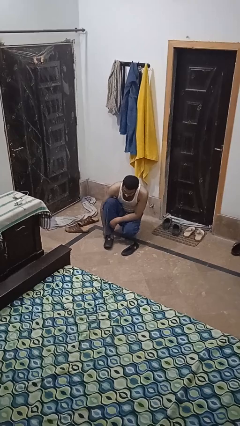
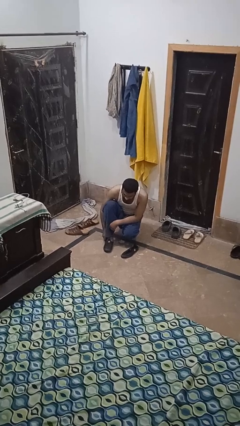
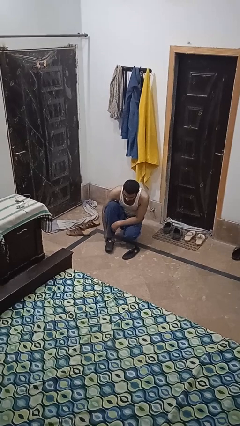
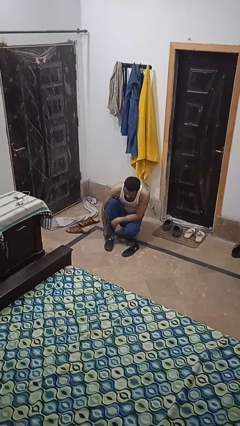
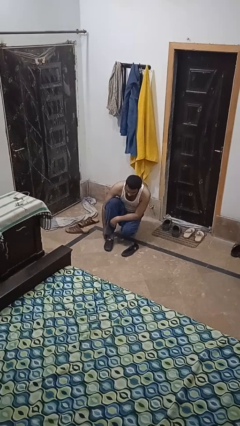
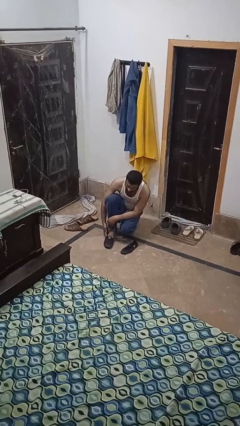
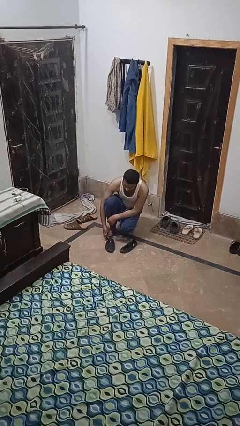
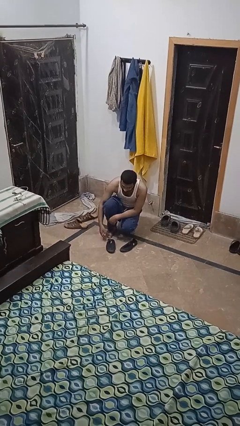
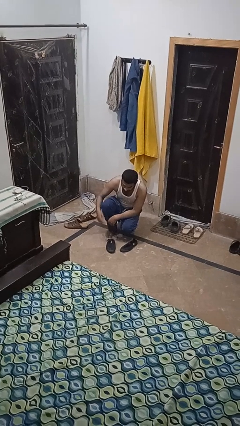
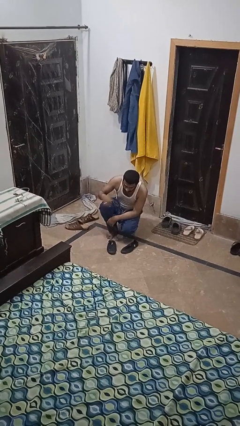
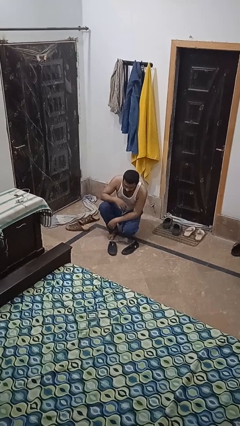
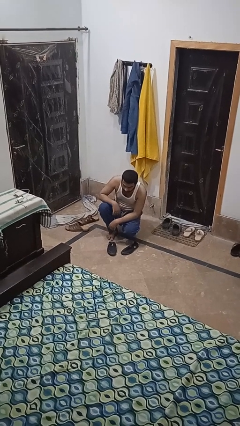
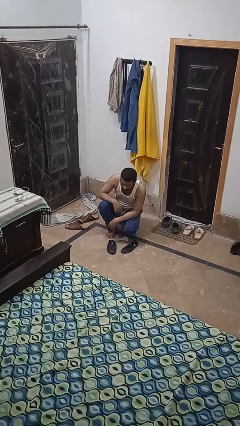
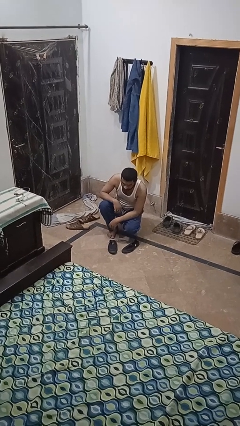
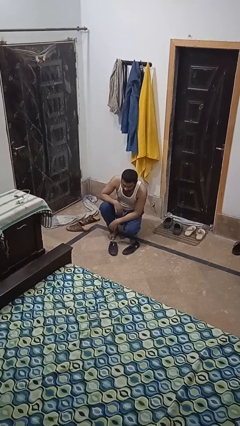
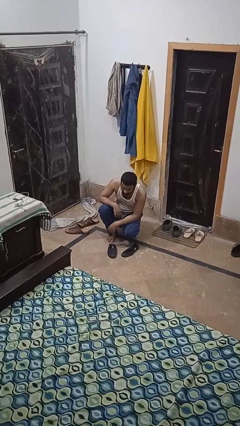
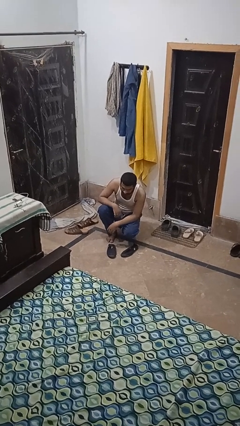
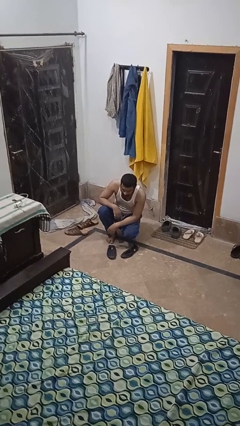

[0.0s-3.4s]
person takes off shoes

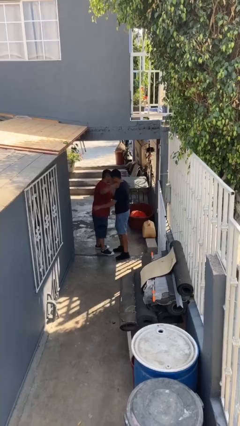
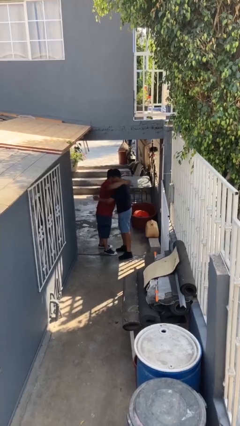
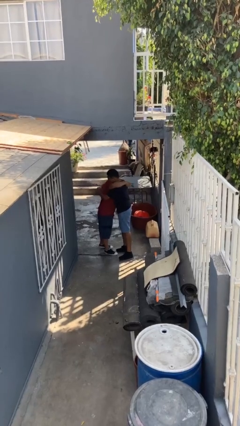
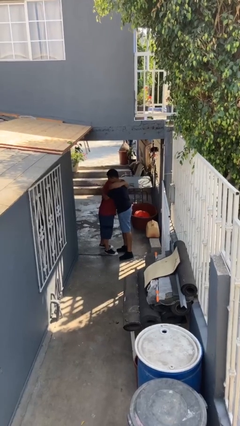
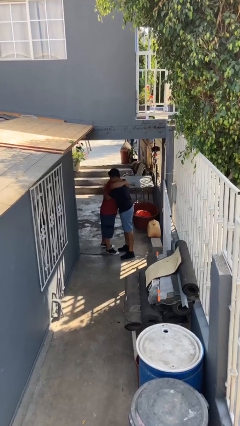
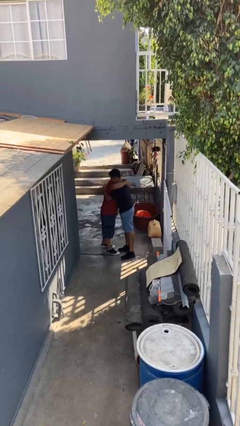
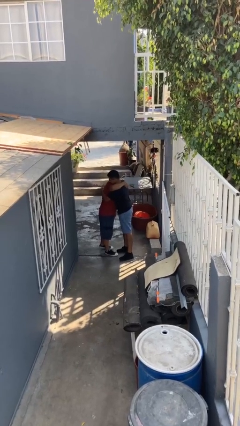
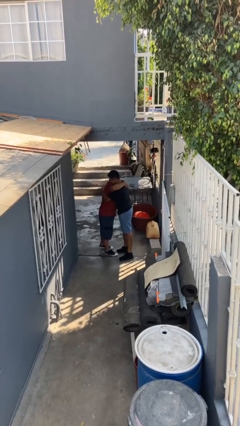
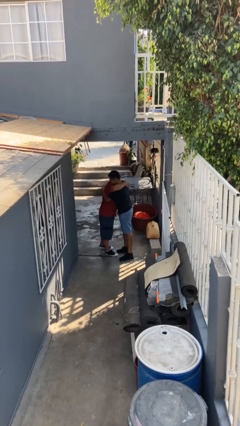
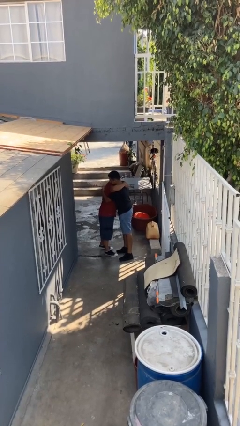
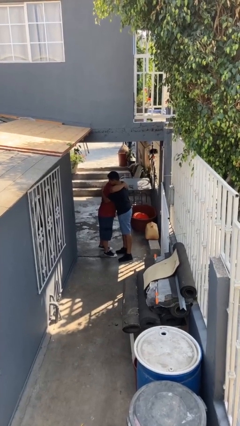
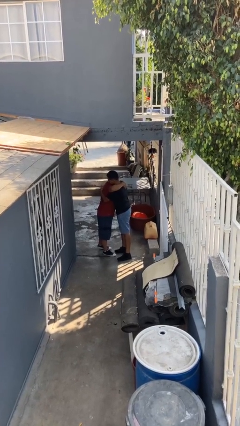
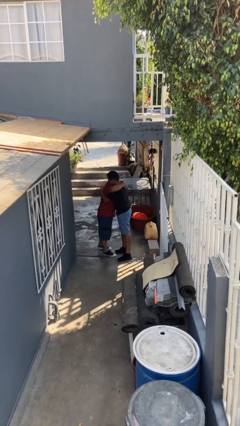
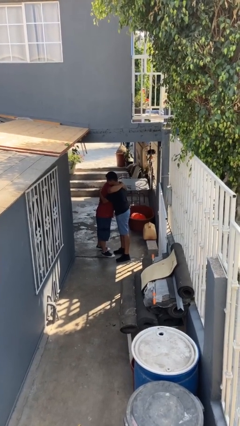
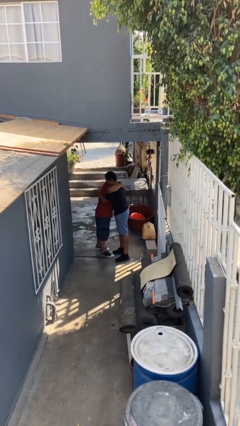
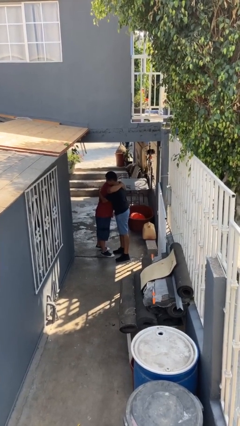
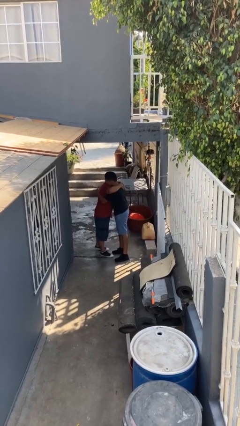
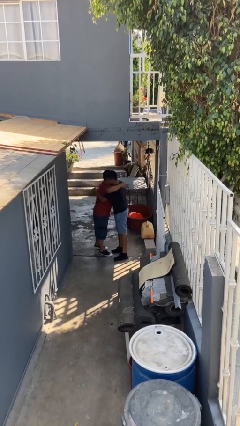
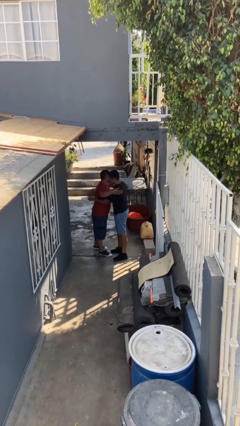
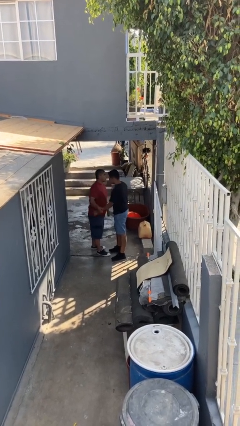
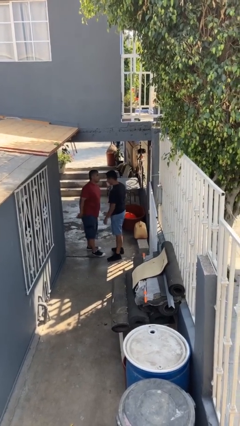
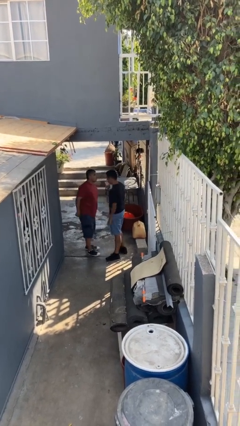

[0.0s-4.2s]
person embraces person

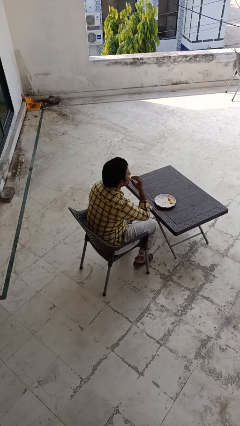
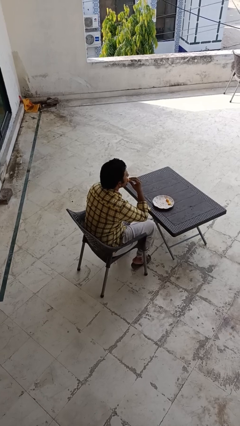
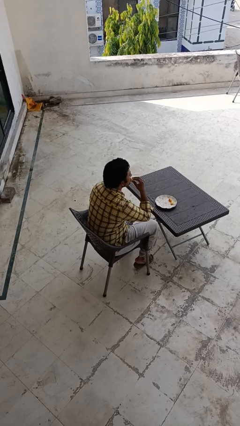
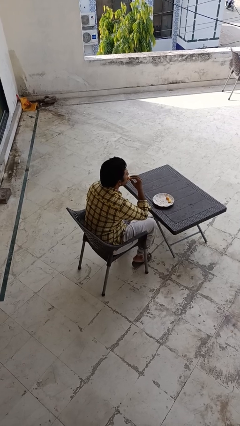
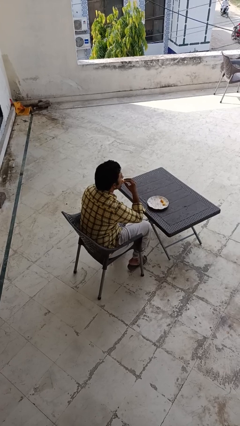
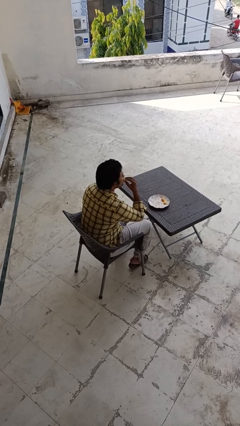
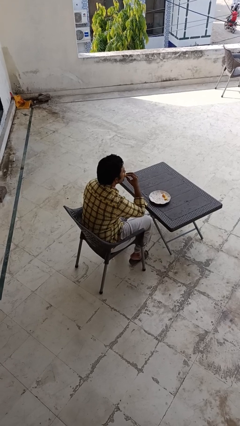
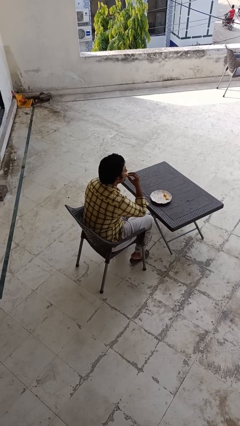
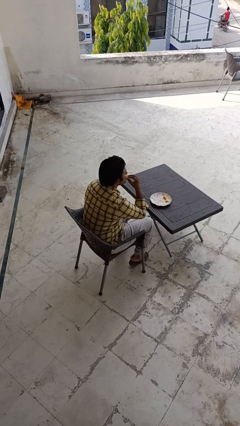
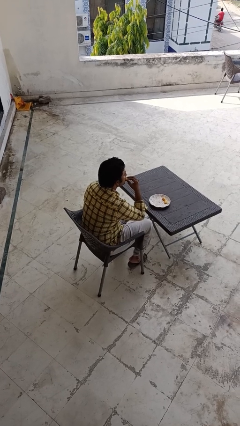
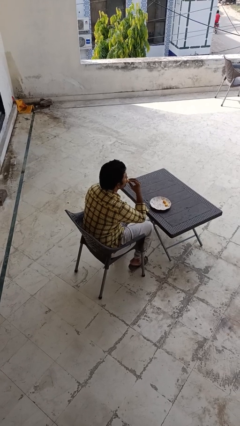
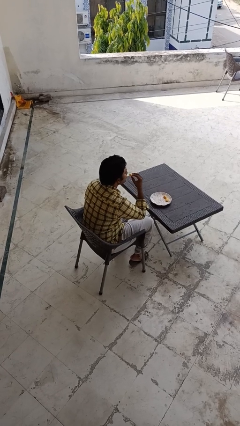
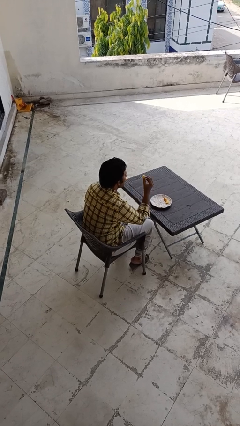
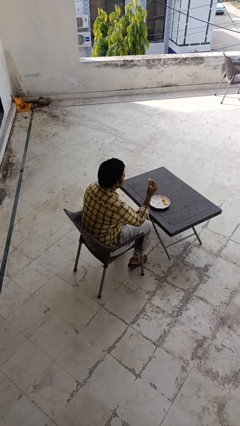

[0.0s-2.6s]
person eats with hands

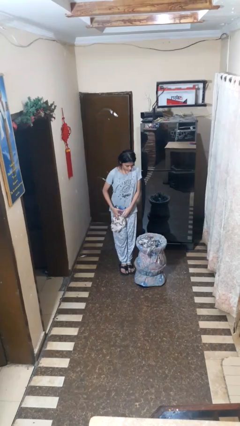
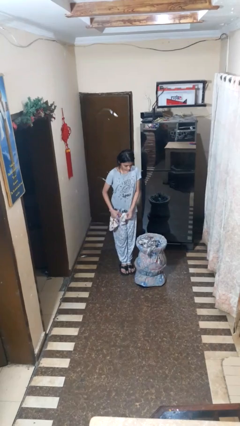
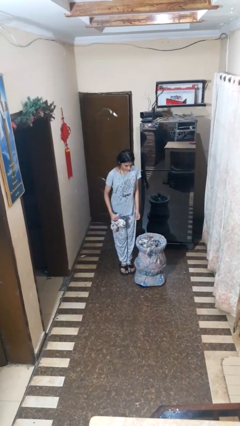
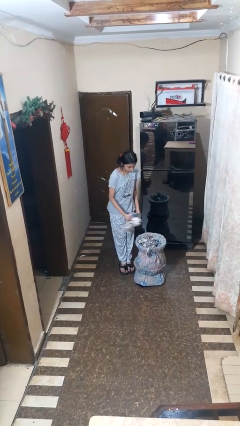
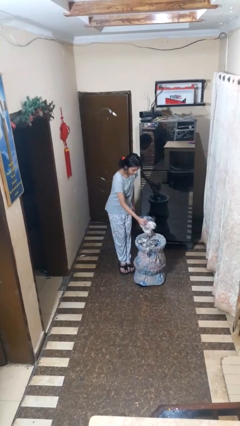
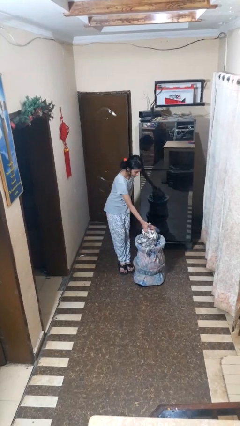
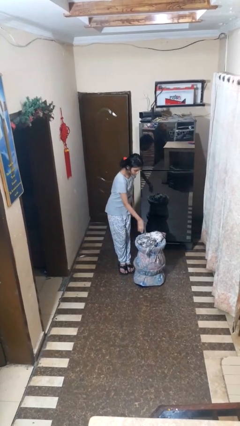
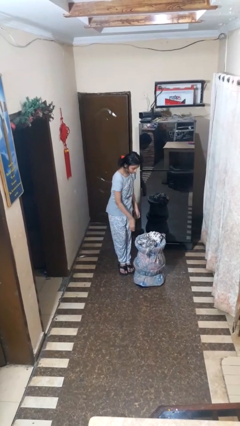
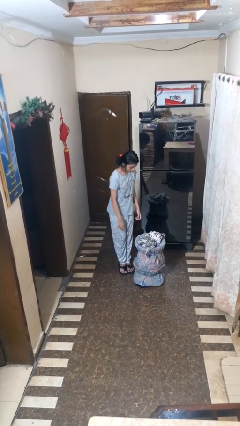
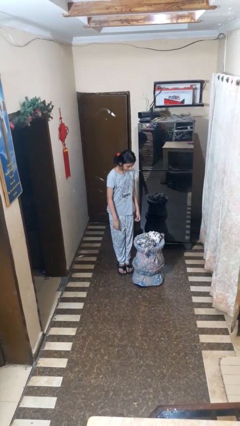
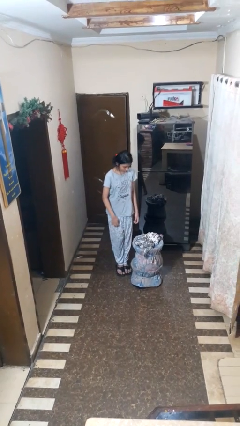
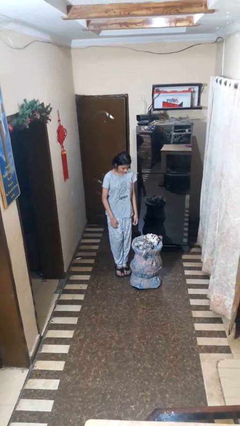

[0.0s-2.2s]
person takes object from basket

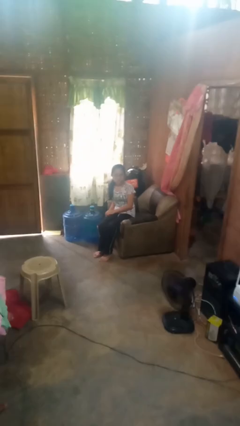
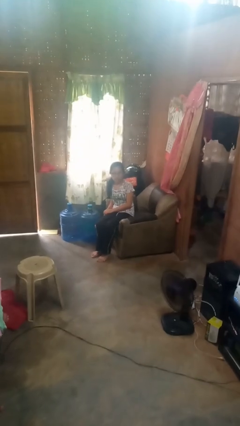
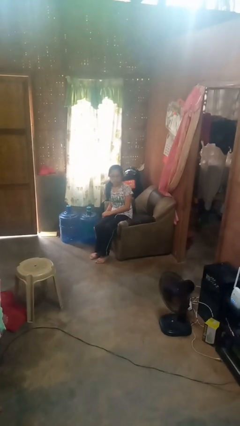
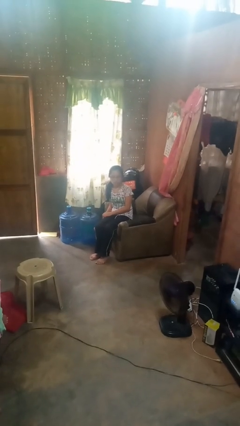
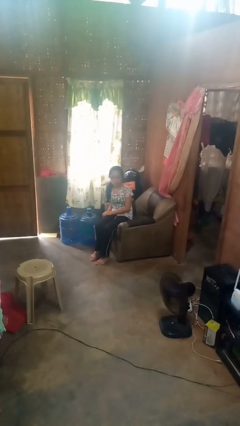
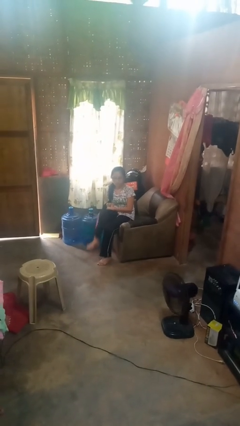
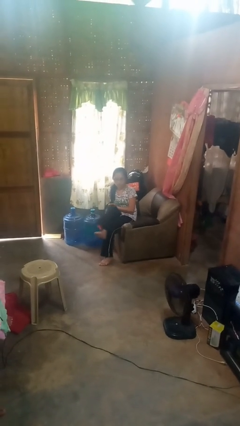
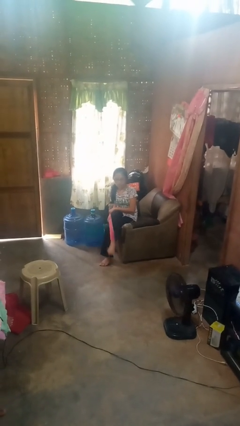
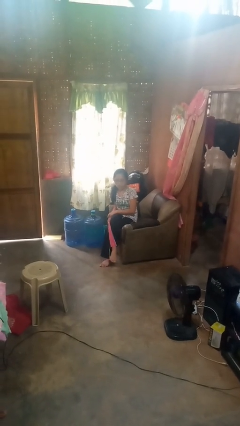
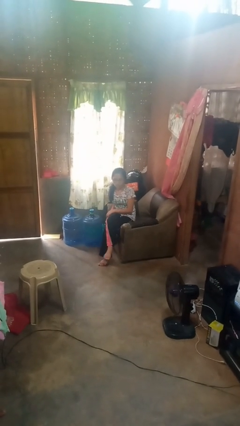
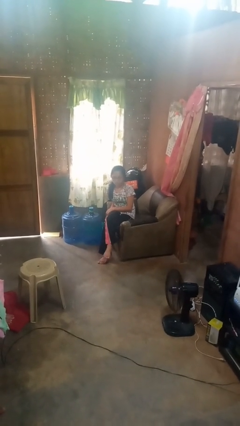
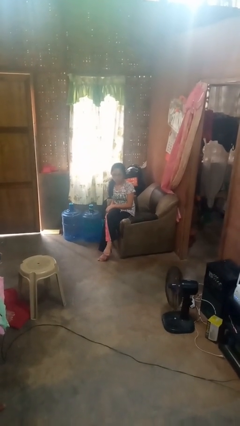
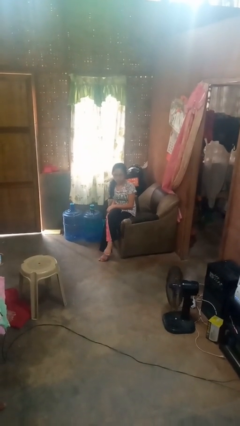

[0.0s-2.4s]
person crosses legs

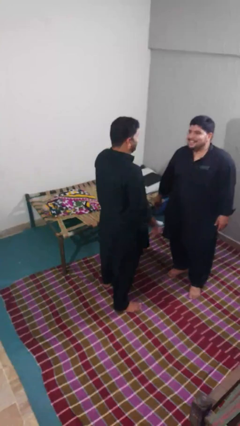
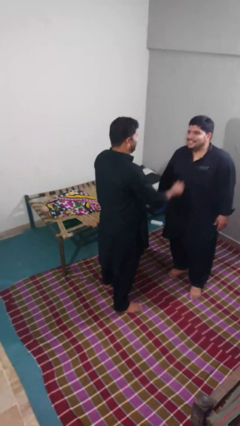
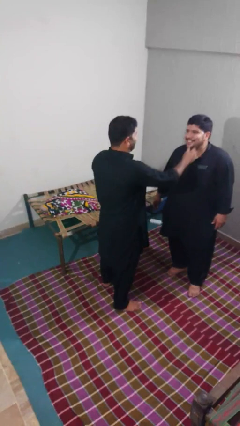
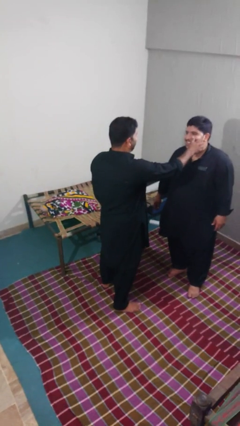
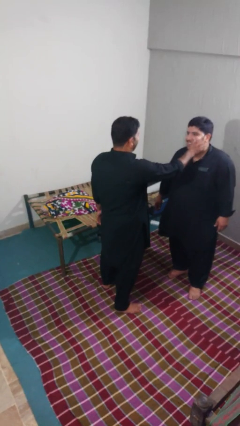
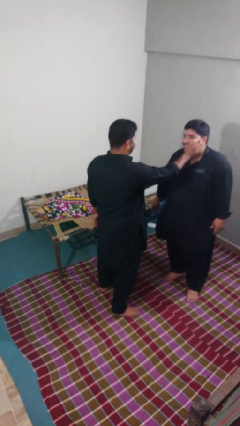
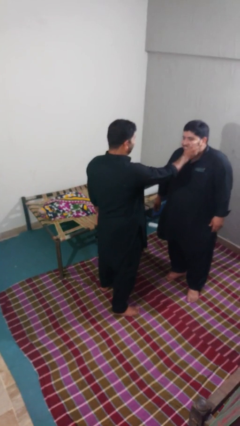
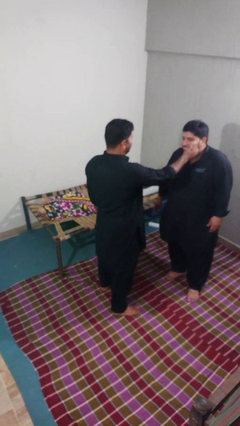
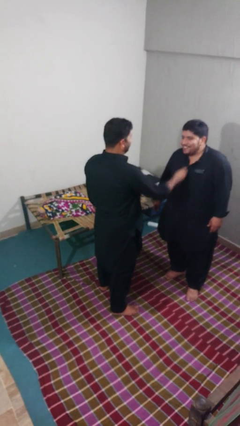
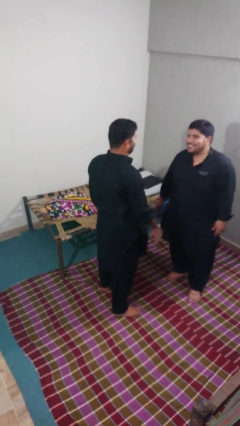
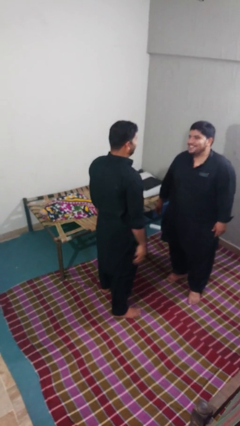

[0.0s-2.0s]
person touches face of person

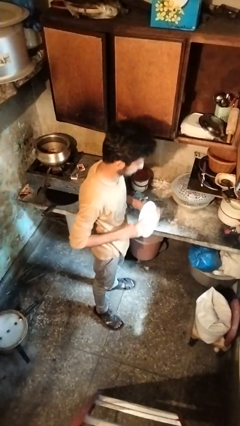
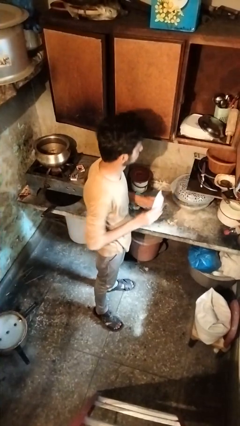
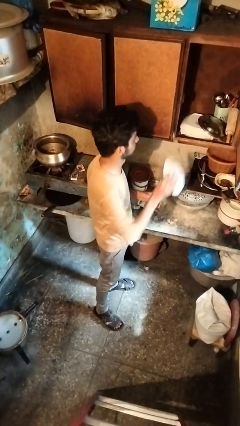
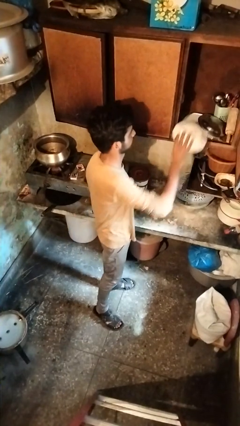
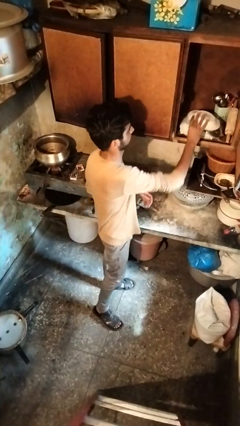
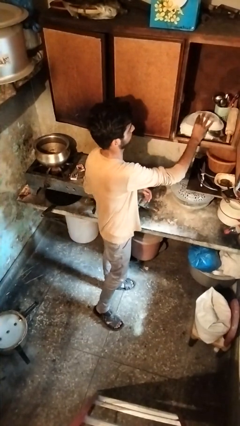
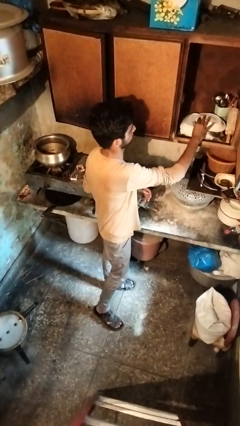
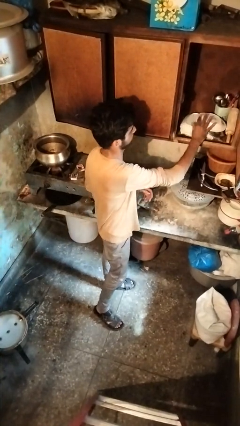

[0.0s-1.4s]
person puts down object into cabinet
